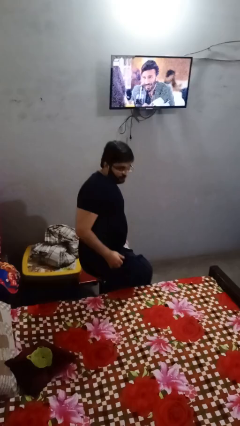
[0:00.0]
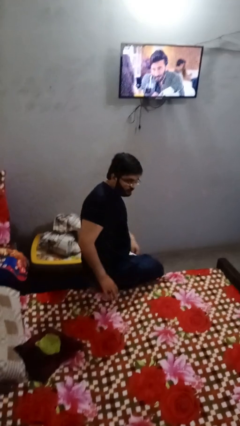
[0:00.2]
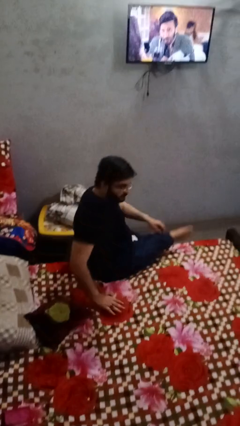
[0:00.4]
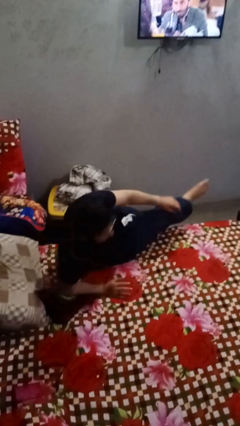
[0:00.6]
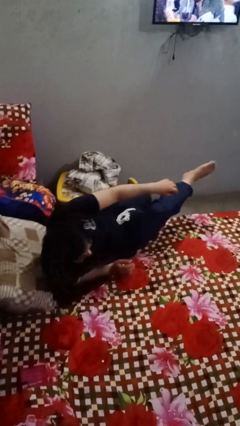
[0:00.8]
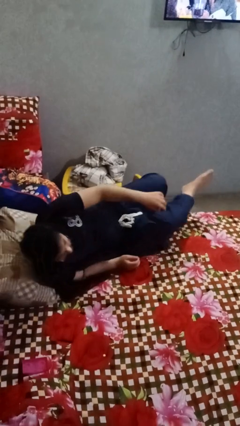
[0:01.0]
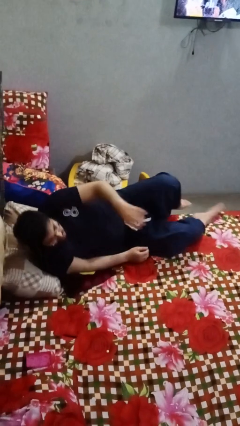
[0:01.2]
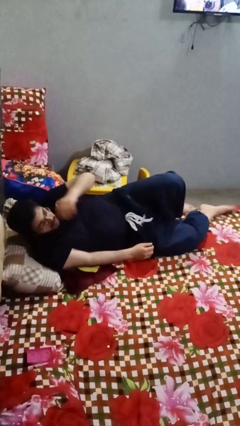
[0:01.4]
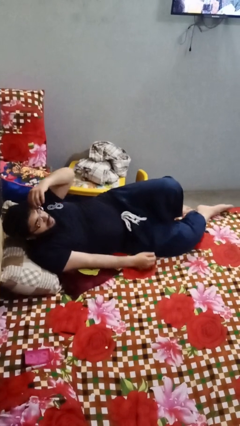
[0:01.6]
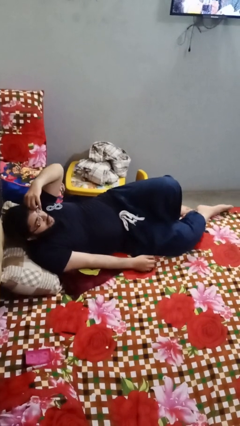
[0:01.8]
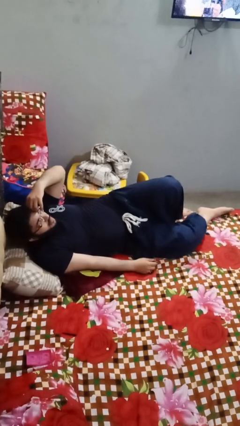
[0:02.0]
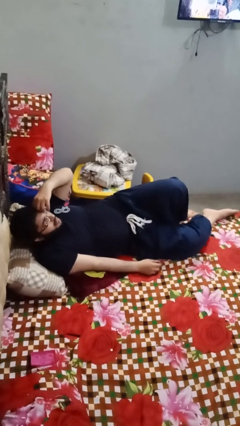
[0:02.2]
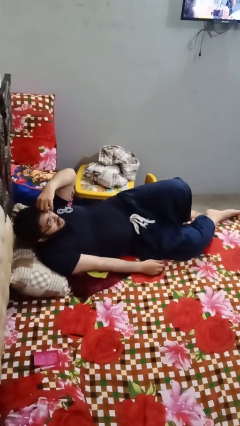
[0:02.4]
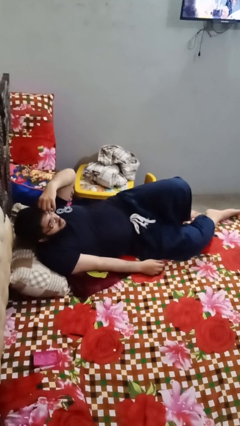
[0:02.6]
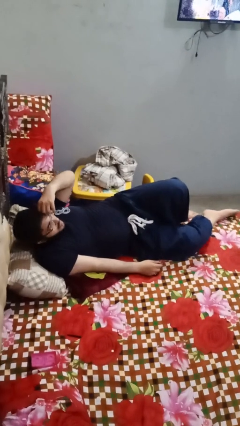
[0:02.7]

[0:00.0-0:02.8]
person lies down on bed

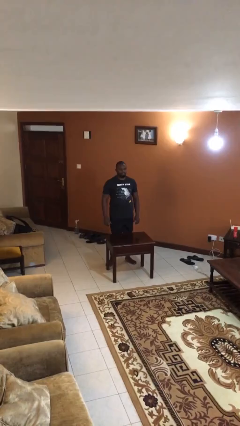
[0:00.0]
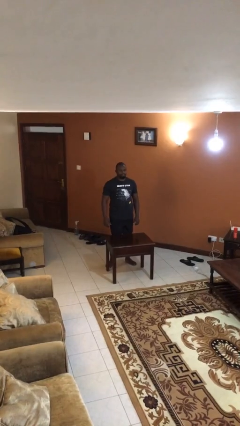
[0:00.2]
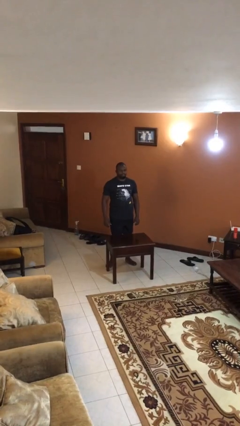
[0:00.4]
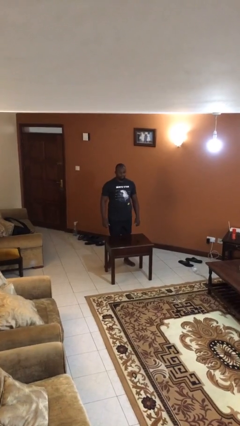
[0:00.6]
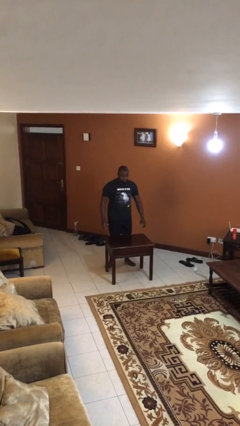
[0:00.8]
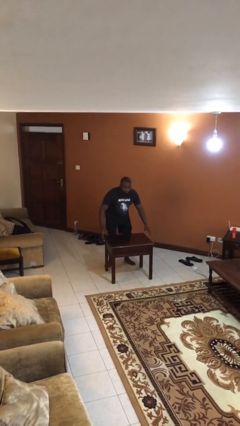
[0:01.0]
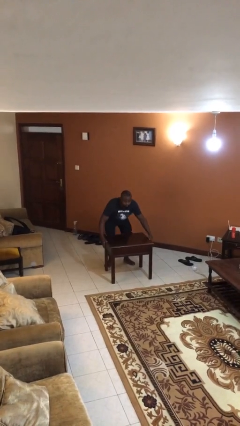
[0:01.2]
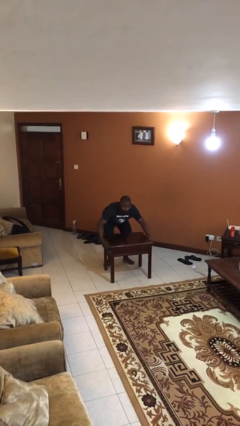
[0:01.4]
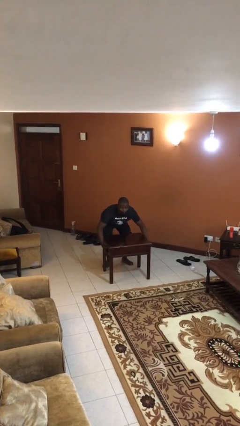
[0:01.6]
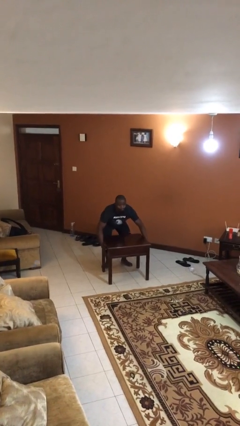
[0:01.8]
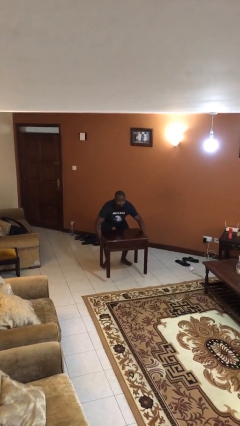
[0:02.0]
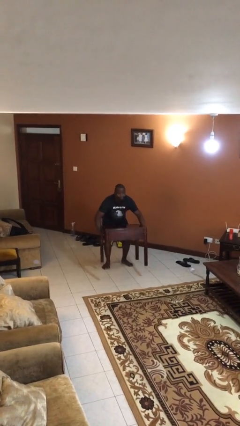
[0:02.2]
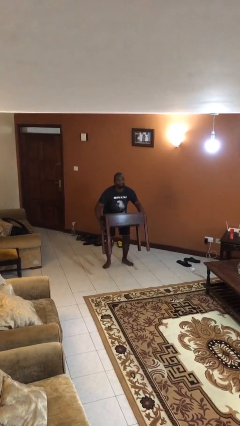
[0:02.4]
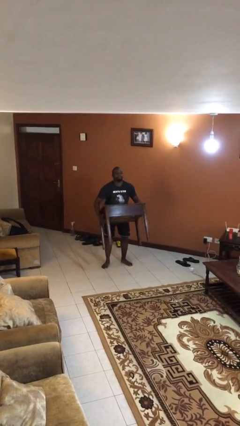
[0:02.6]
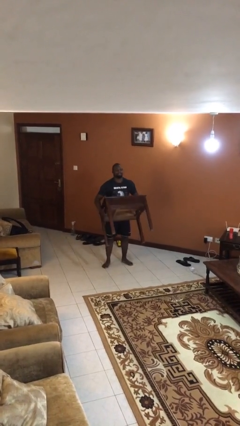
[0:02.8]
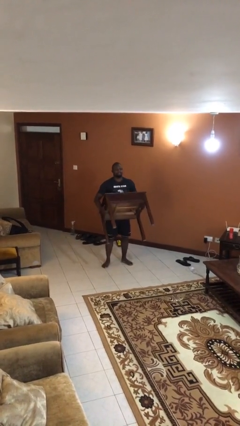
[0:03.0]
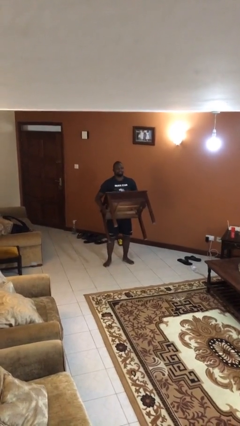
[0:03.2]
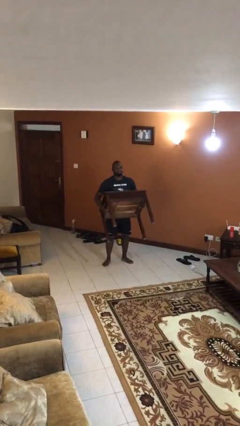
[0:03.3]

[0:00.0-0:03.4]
person picks up object from floor

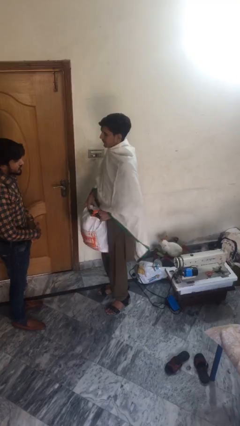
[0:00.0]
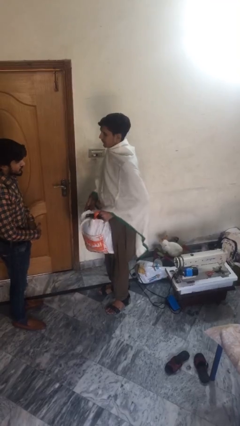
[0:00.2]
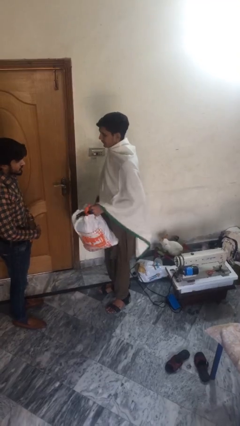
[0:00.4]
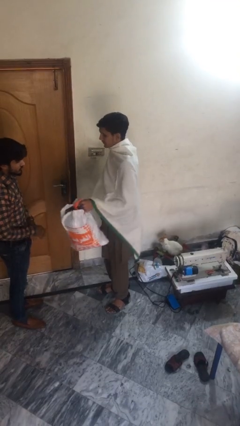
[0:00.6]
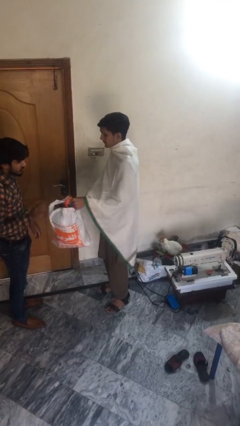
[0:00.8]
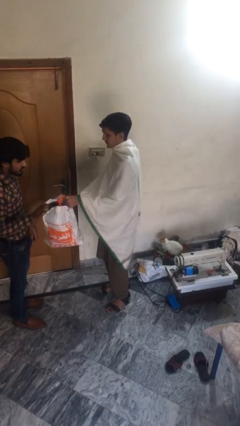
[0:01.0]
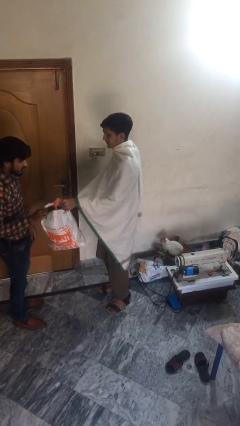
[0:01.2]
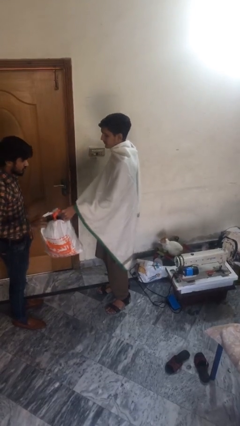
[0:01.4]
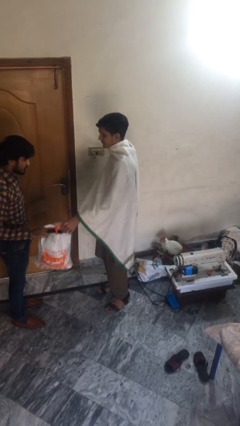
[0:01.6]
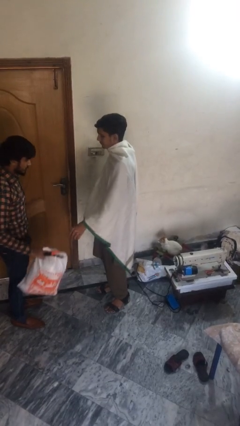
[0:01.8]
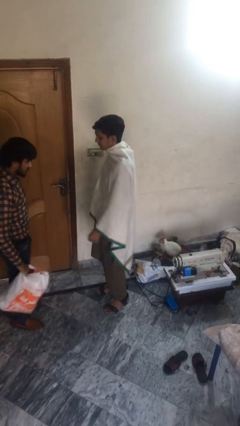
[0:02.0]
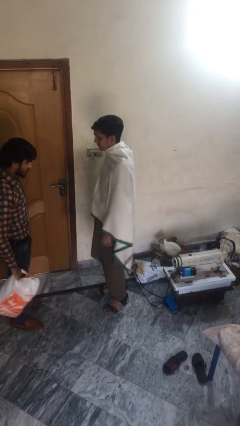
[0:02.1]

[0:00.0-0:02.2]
person transfers object to person

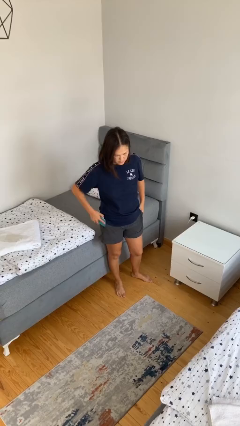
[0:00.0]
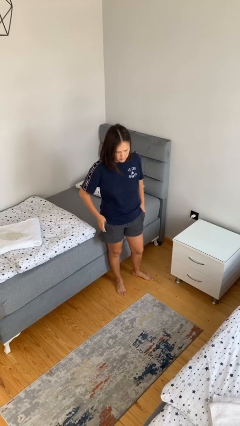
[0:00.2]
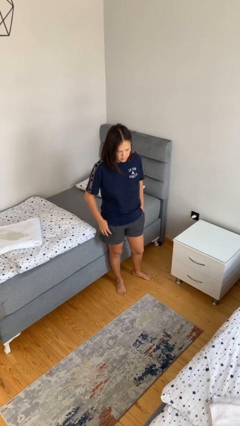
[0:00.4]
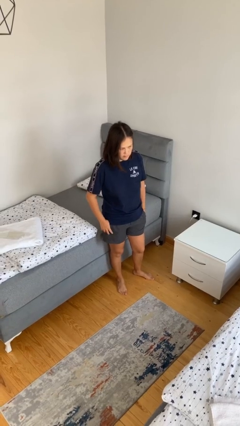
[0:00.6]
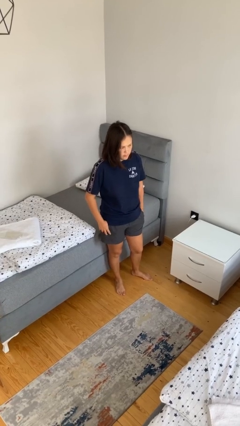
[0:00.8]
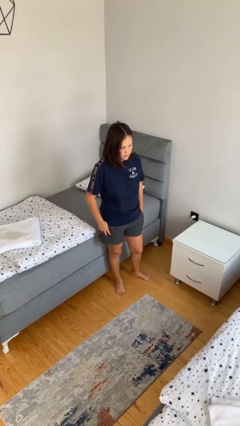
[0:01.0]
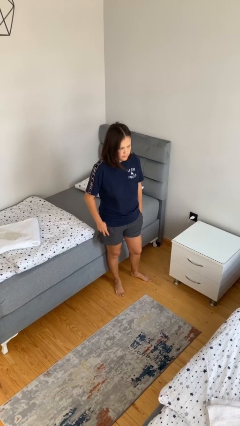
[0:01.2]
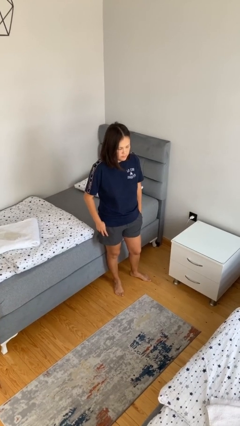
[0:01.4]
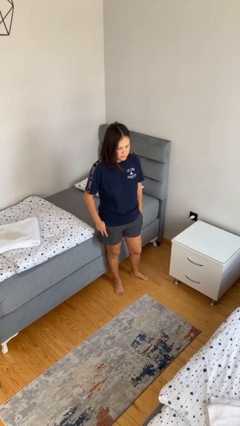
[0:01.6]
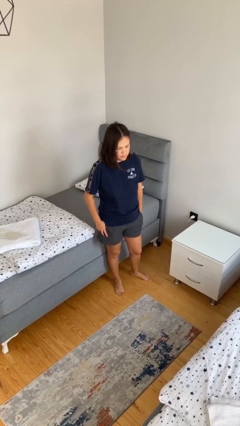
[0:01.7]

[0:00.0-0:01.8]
person puts phone into pocket

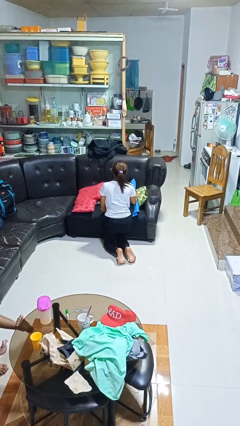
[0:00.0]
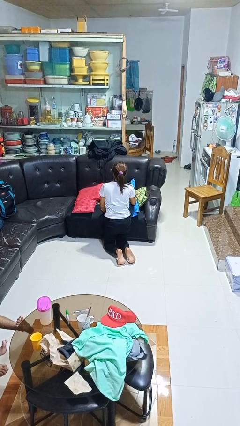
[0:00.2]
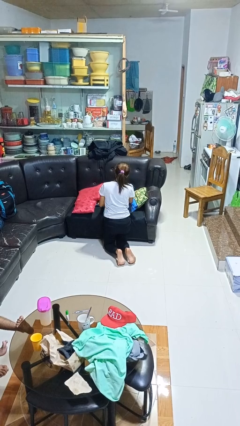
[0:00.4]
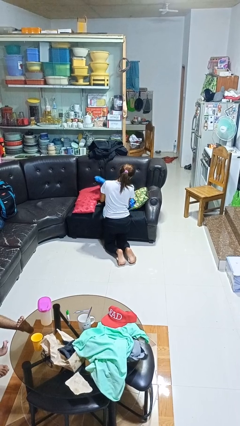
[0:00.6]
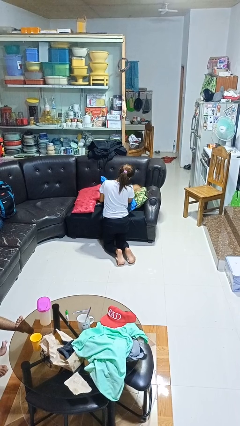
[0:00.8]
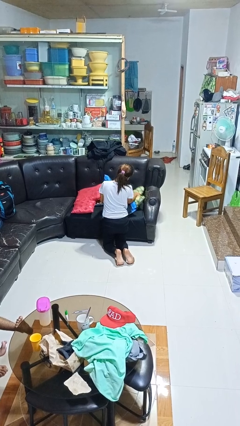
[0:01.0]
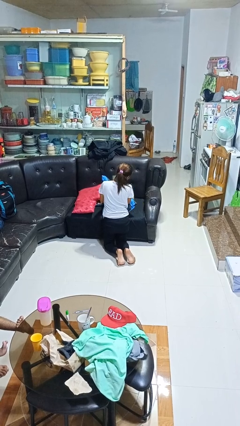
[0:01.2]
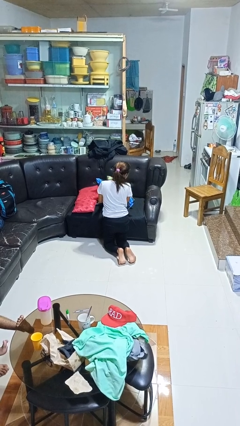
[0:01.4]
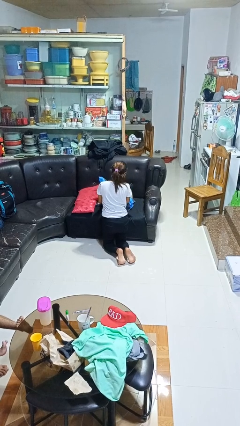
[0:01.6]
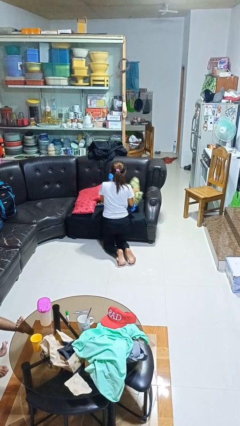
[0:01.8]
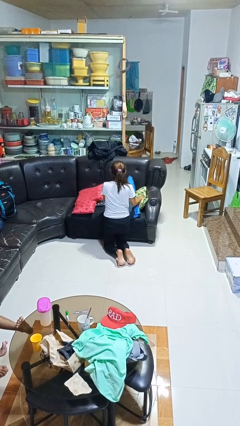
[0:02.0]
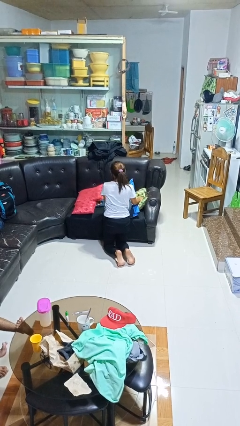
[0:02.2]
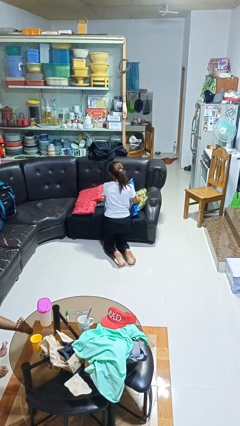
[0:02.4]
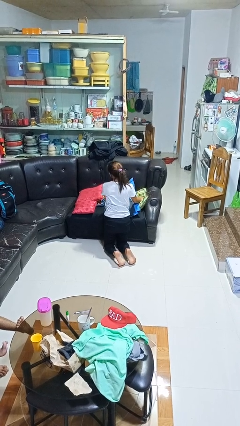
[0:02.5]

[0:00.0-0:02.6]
person searches in couch

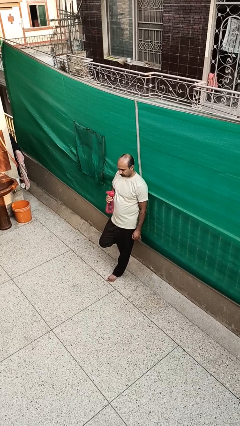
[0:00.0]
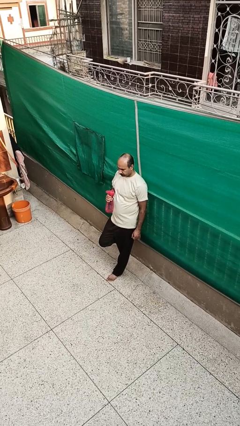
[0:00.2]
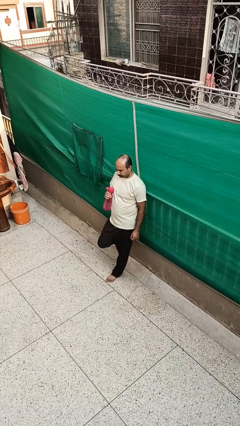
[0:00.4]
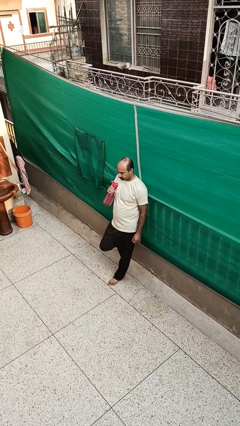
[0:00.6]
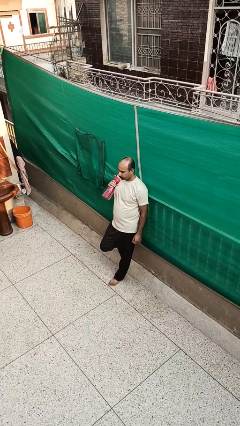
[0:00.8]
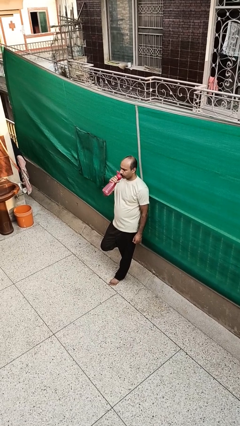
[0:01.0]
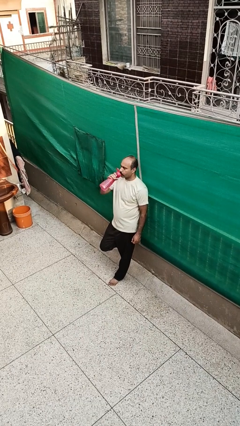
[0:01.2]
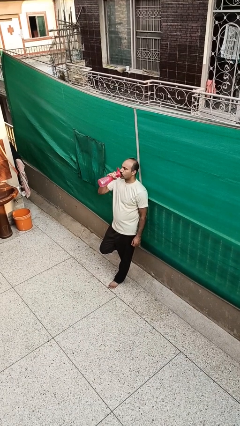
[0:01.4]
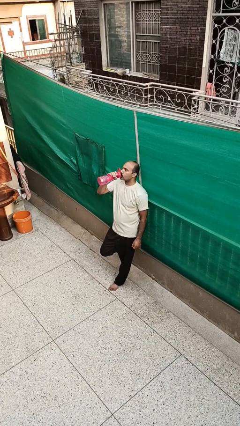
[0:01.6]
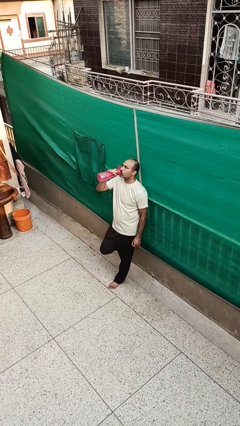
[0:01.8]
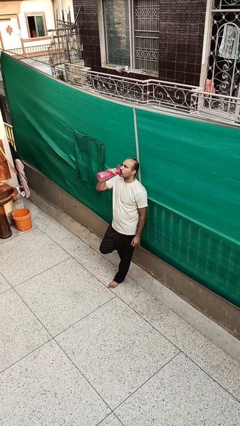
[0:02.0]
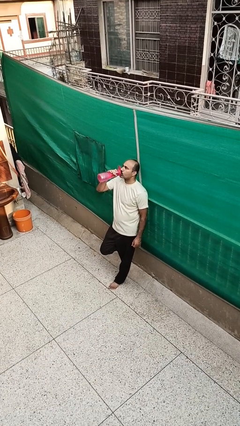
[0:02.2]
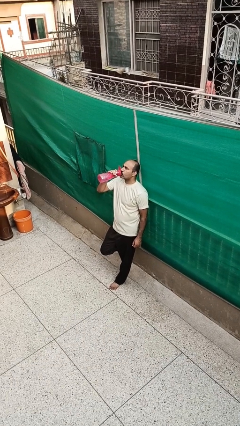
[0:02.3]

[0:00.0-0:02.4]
person drinks from bottle

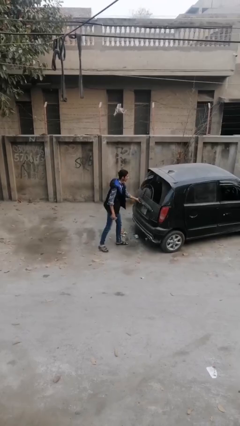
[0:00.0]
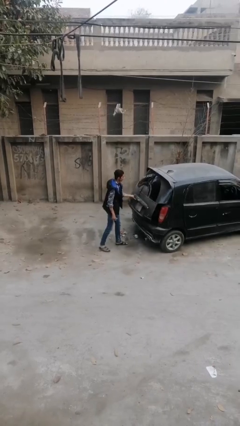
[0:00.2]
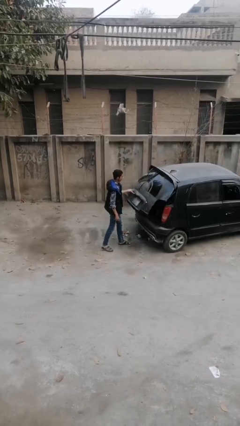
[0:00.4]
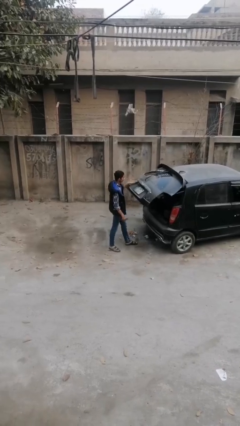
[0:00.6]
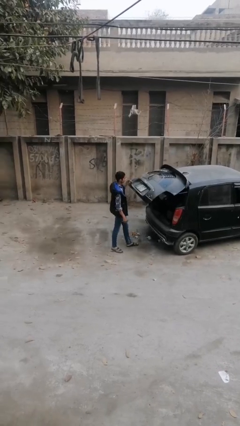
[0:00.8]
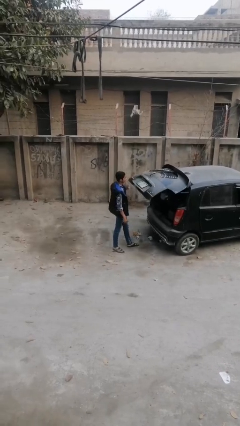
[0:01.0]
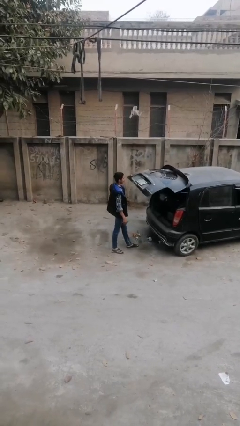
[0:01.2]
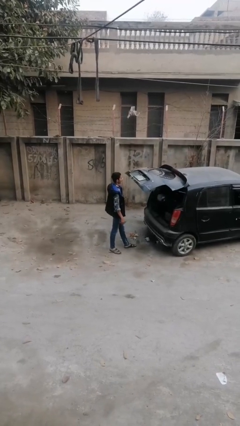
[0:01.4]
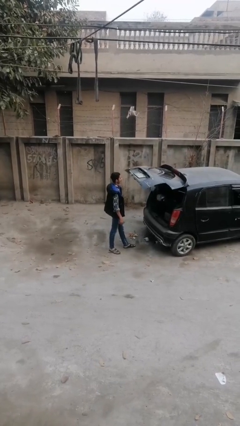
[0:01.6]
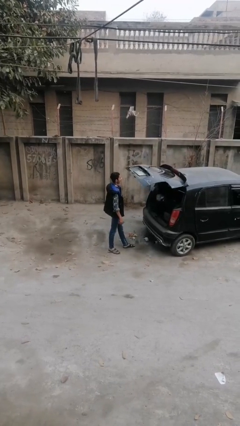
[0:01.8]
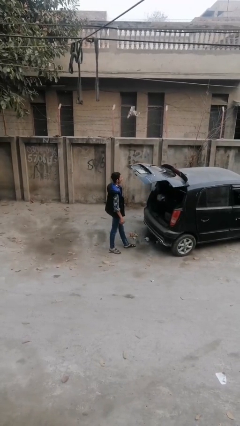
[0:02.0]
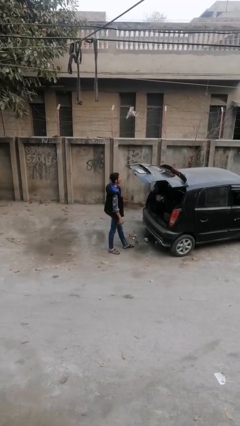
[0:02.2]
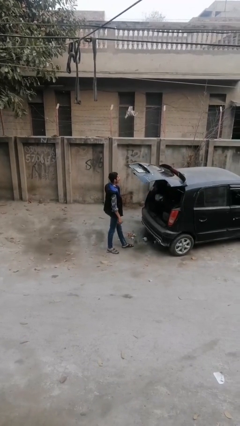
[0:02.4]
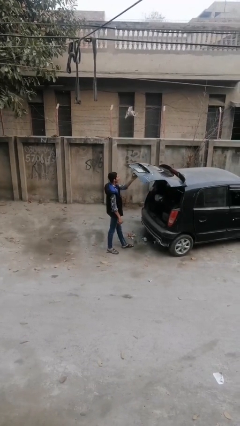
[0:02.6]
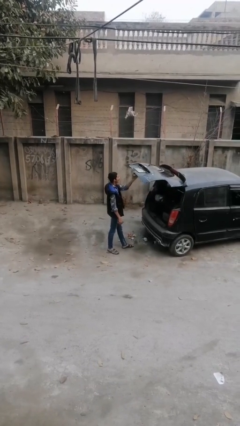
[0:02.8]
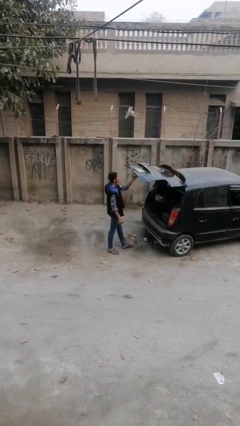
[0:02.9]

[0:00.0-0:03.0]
person opens car trunk
